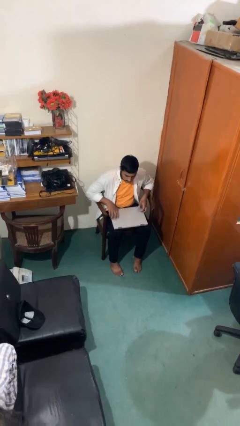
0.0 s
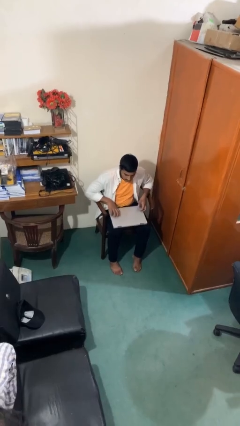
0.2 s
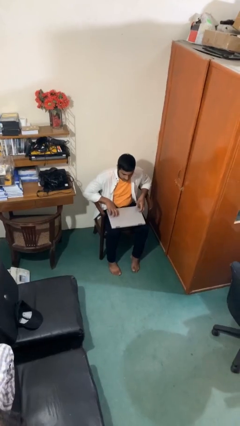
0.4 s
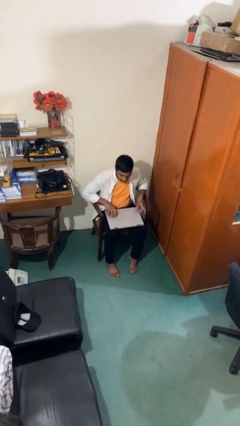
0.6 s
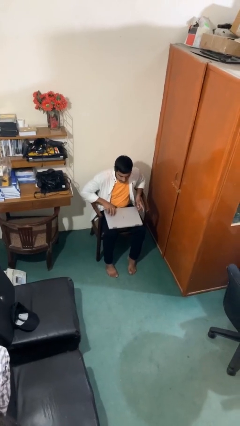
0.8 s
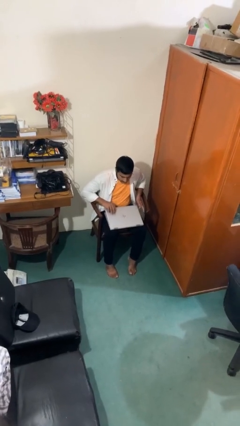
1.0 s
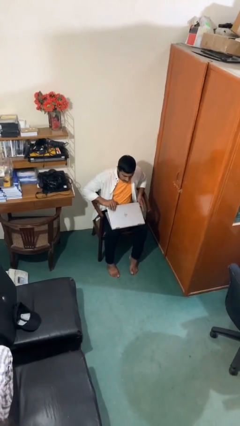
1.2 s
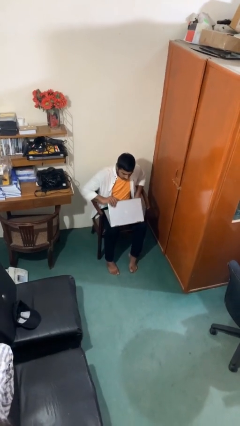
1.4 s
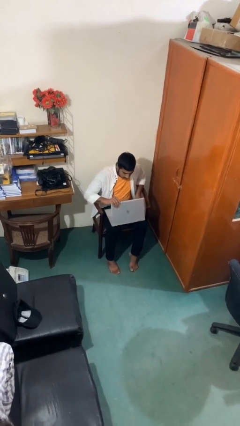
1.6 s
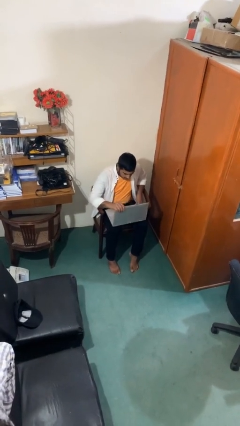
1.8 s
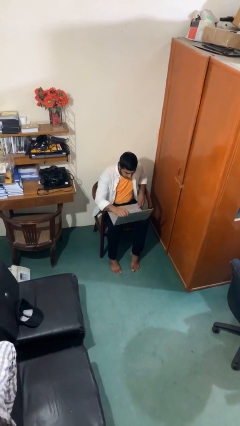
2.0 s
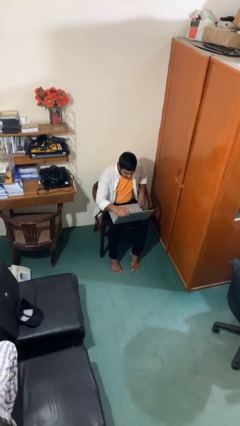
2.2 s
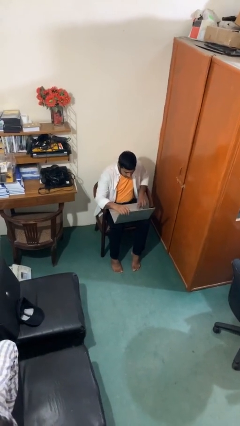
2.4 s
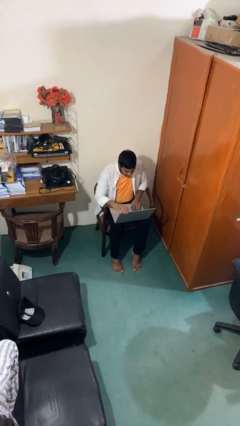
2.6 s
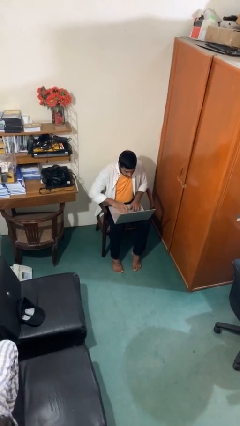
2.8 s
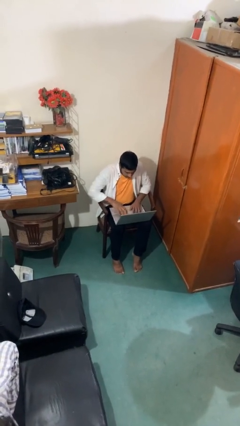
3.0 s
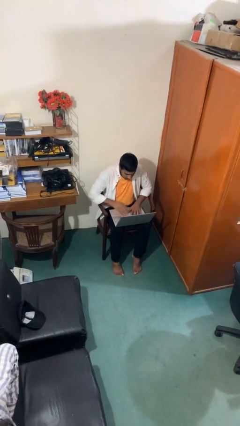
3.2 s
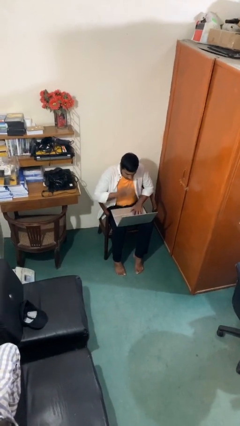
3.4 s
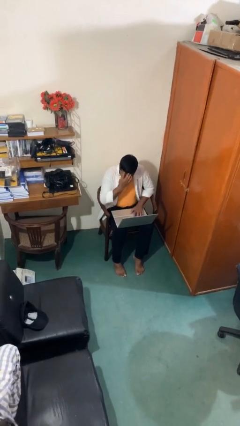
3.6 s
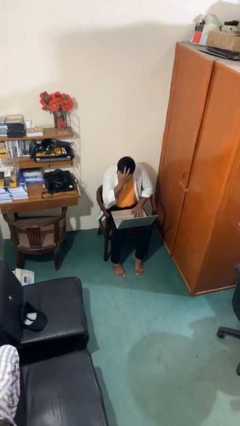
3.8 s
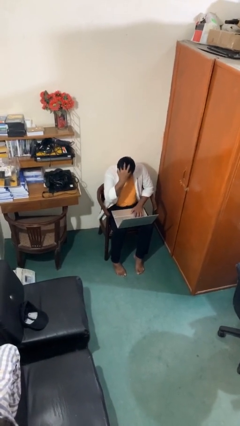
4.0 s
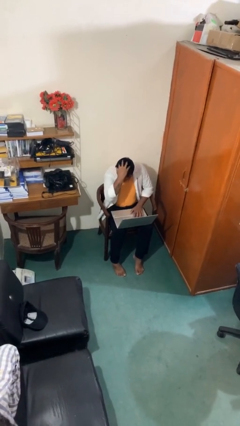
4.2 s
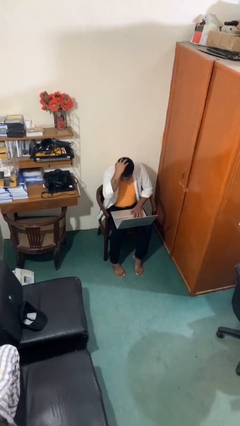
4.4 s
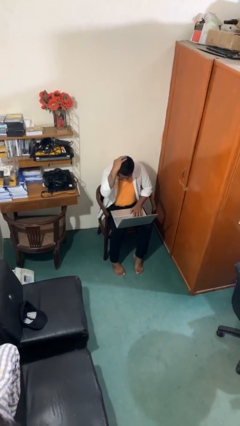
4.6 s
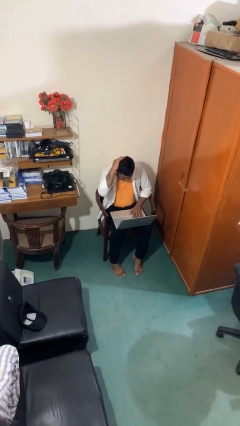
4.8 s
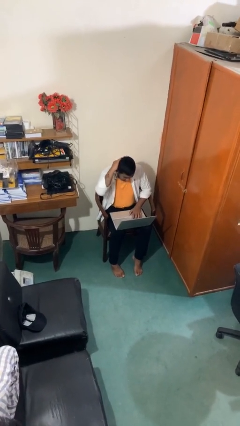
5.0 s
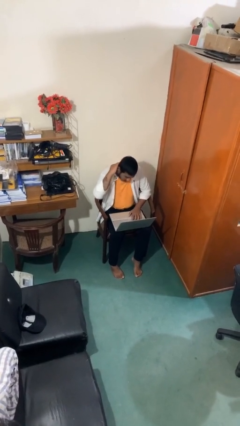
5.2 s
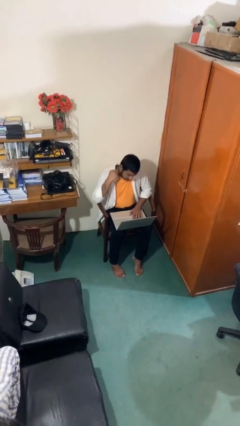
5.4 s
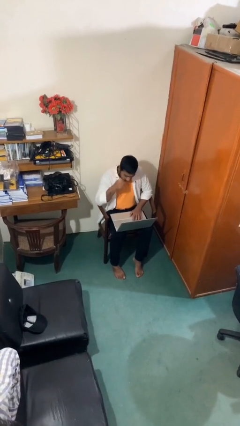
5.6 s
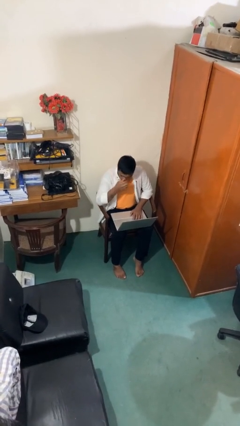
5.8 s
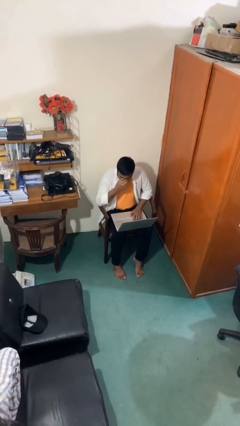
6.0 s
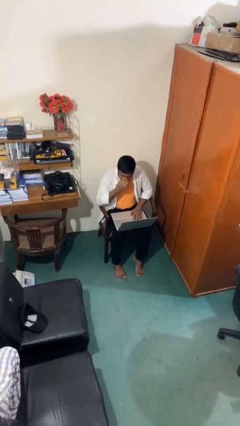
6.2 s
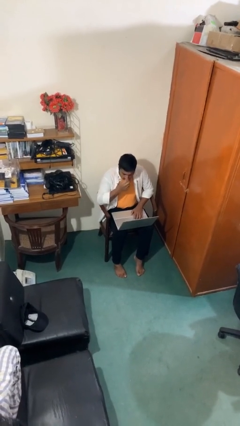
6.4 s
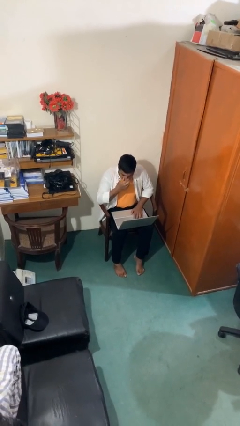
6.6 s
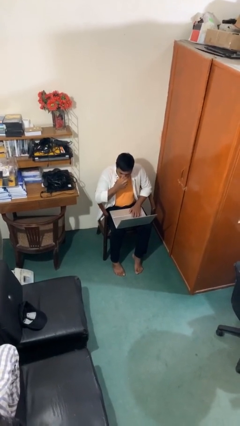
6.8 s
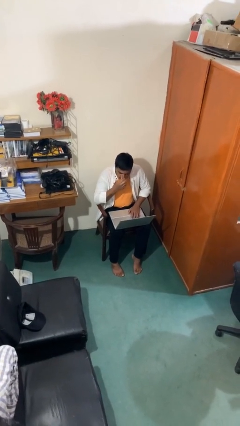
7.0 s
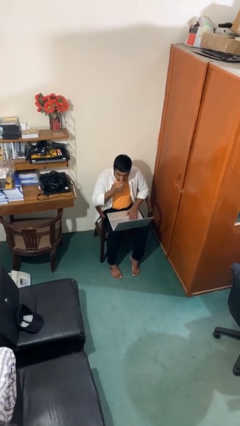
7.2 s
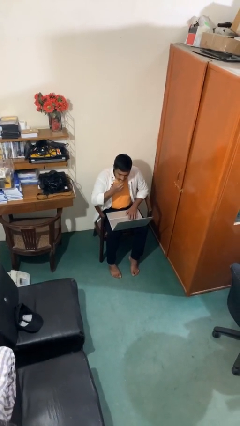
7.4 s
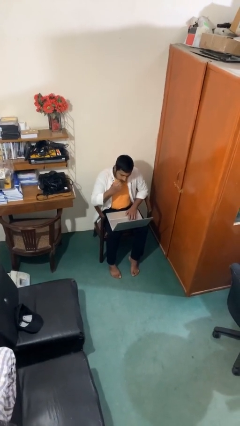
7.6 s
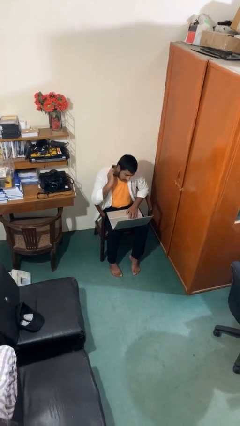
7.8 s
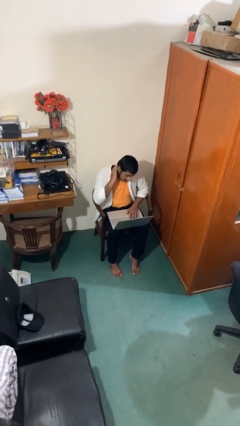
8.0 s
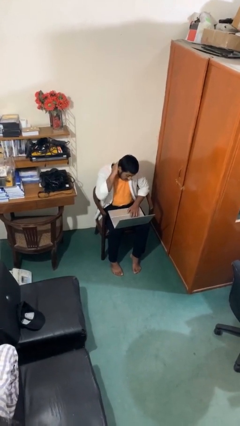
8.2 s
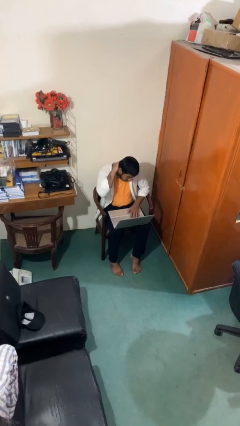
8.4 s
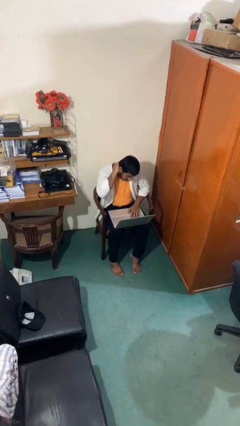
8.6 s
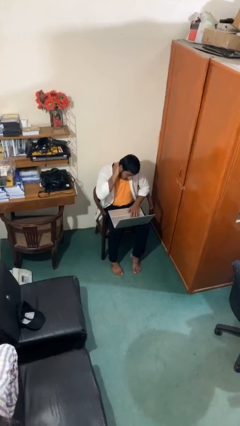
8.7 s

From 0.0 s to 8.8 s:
person interacts with laptop

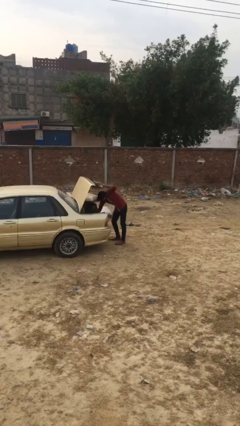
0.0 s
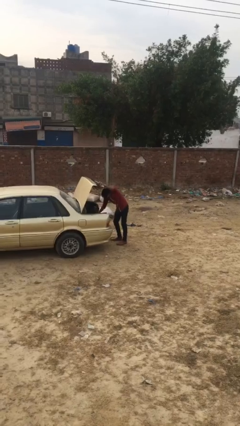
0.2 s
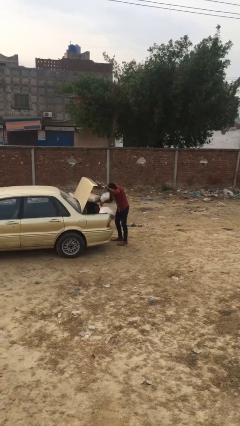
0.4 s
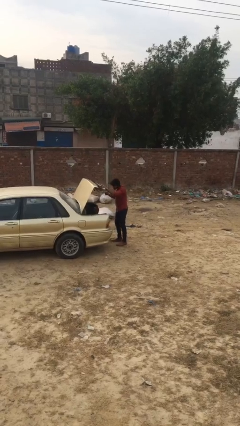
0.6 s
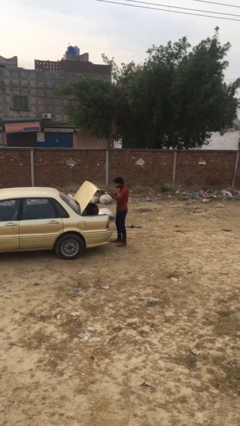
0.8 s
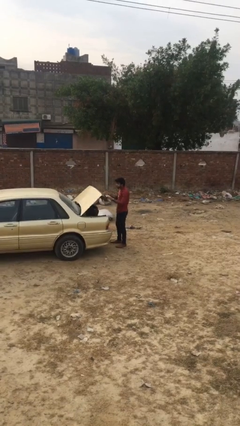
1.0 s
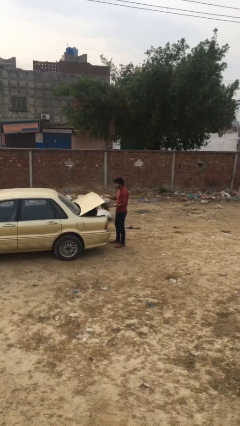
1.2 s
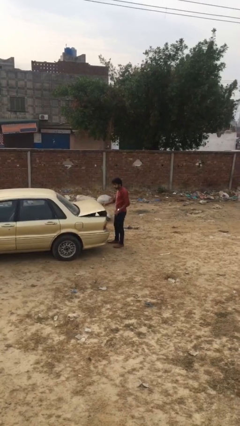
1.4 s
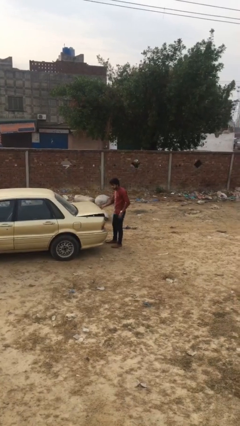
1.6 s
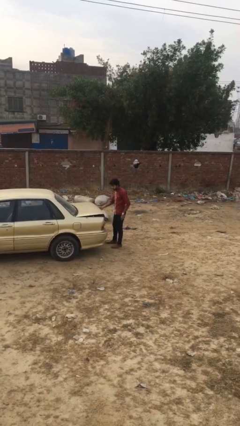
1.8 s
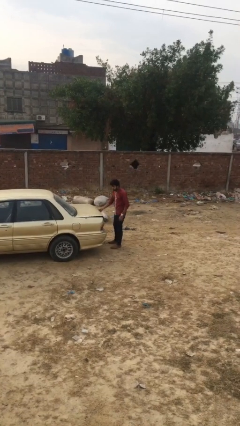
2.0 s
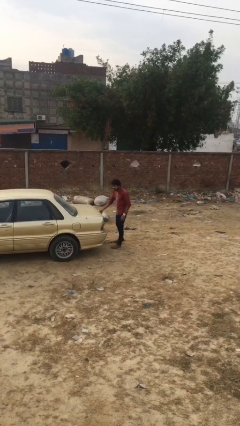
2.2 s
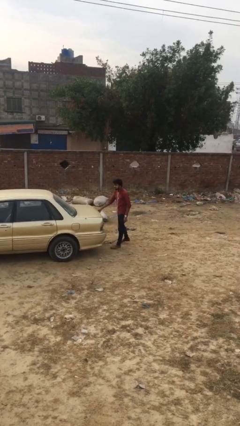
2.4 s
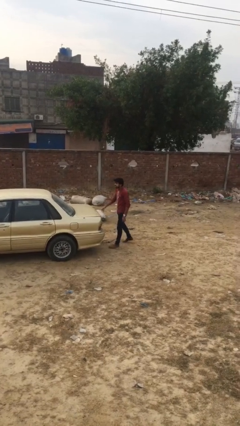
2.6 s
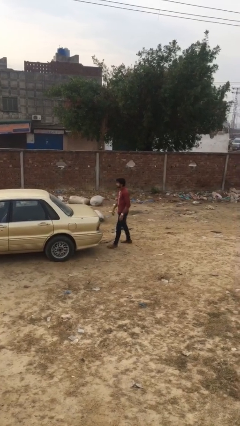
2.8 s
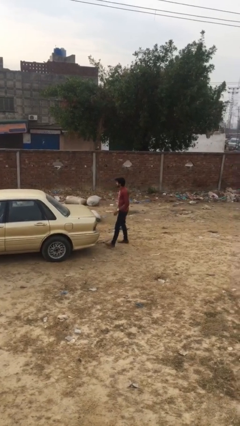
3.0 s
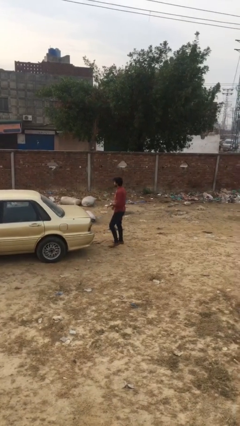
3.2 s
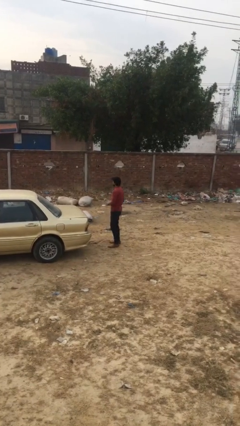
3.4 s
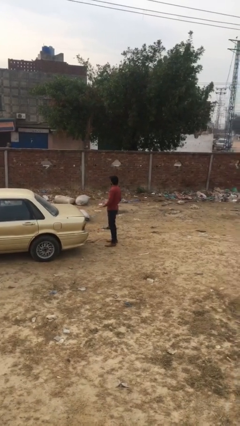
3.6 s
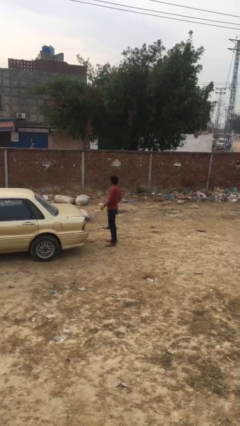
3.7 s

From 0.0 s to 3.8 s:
person closes car trunk

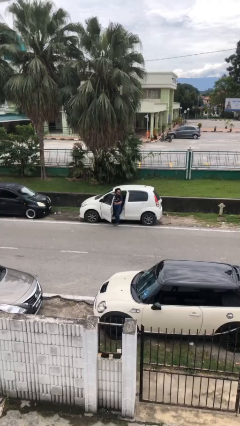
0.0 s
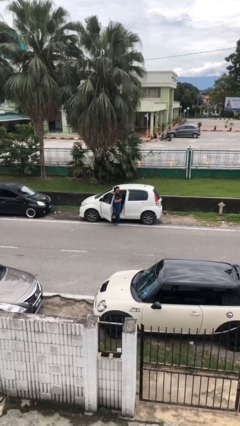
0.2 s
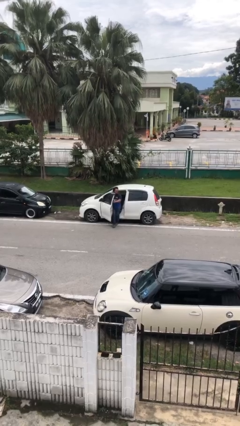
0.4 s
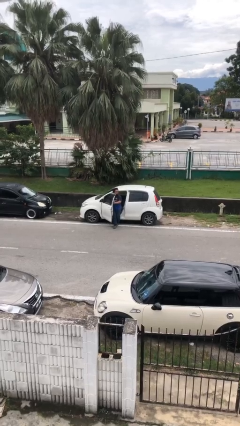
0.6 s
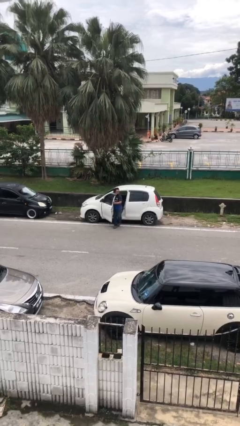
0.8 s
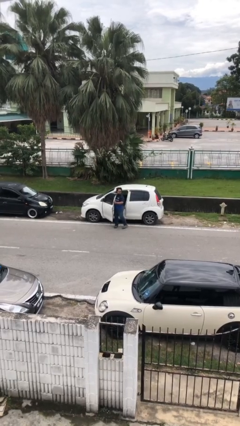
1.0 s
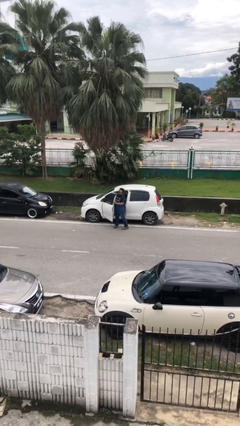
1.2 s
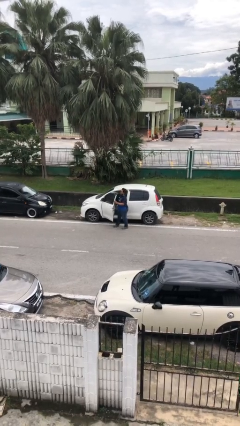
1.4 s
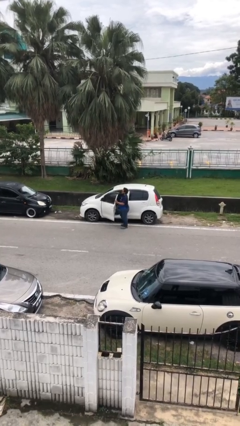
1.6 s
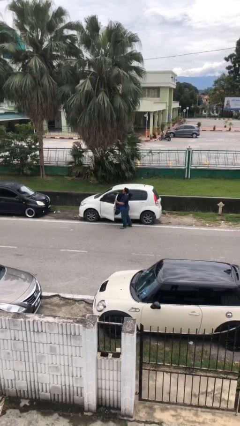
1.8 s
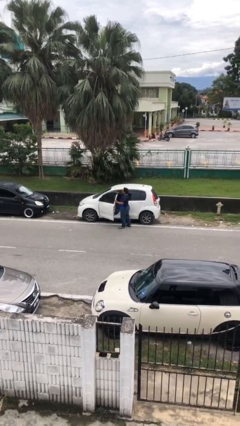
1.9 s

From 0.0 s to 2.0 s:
person exits car

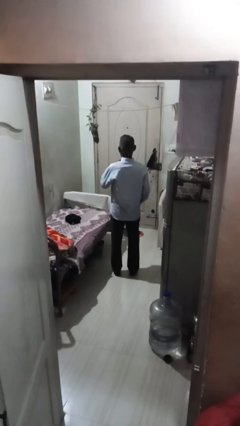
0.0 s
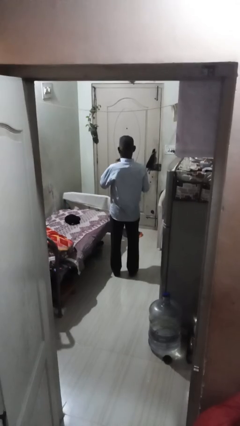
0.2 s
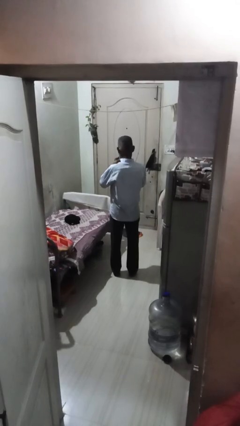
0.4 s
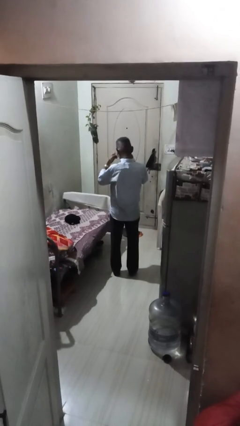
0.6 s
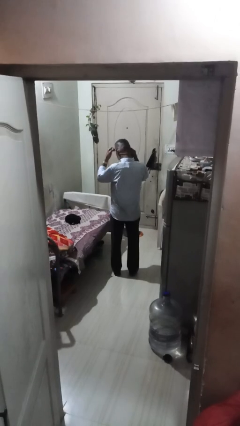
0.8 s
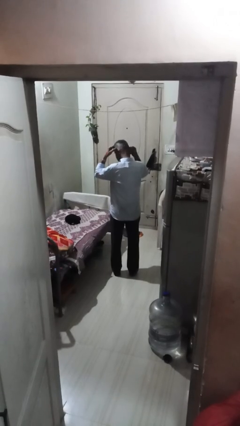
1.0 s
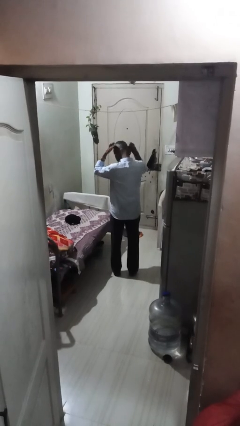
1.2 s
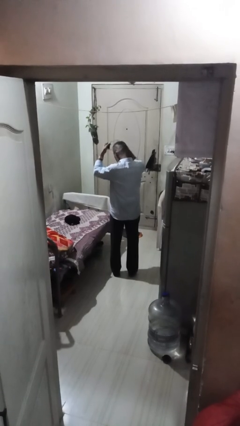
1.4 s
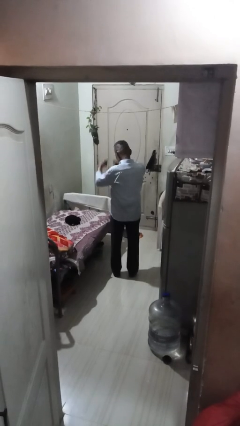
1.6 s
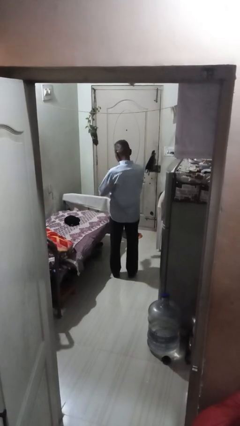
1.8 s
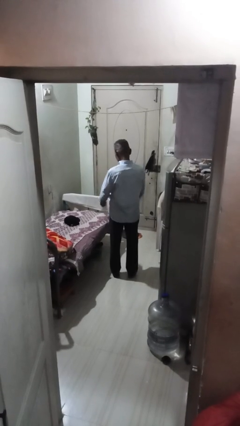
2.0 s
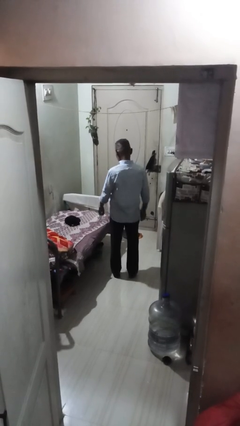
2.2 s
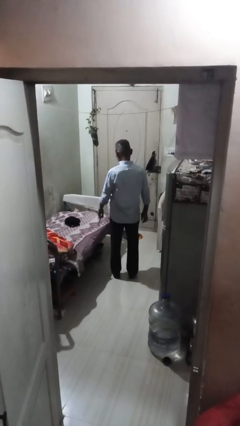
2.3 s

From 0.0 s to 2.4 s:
person takes off necklace

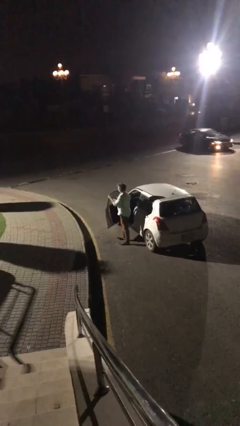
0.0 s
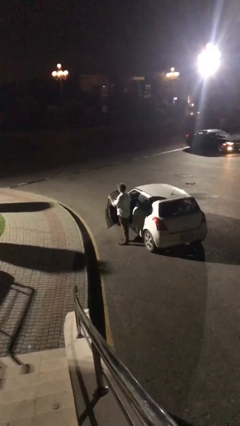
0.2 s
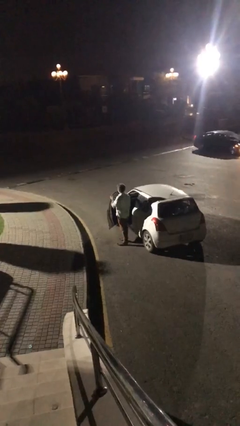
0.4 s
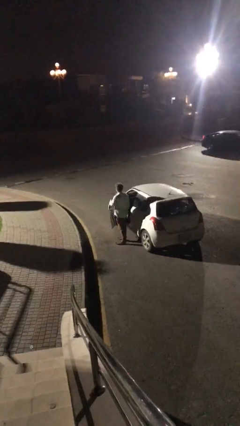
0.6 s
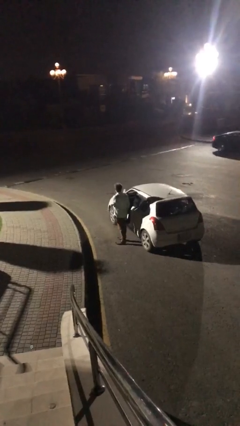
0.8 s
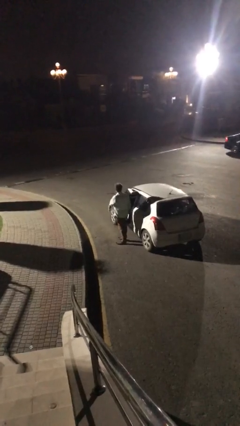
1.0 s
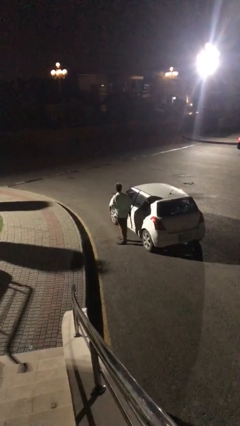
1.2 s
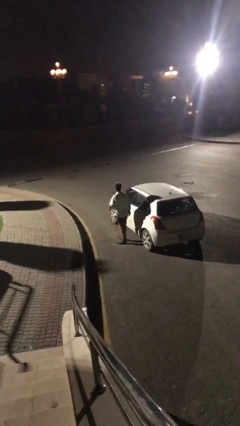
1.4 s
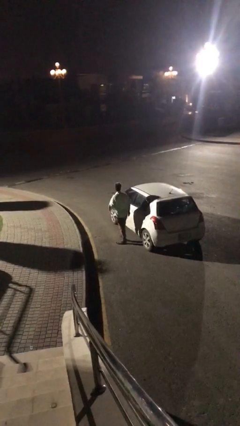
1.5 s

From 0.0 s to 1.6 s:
person closes car door
